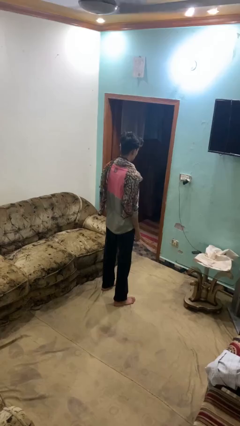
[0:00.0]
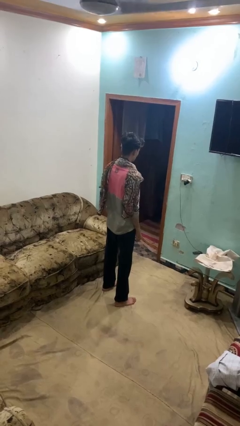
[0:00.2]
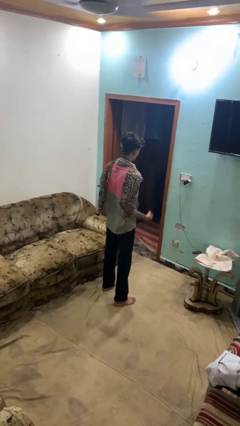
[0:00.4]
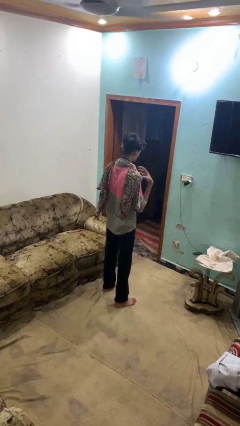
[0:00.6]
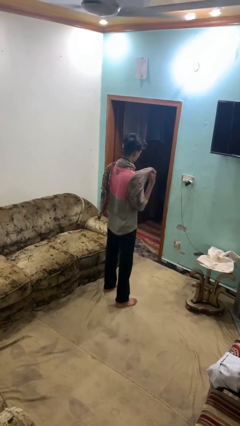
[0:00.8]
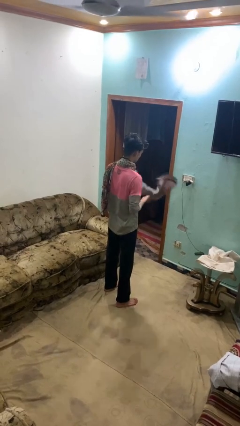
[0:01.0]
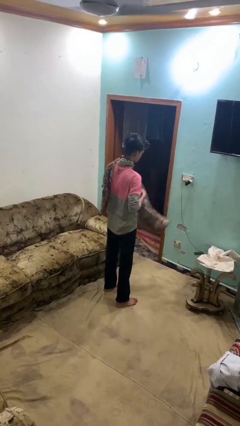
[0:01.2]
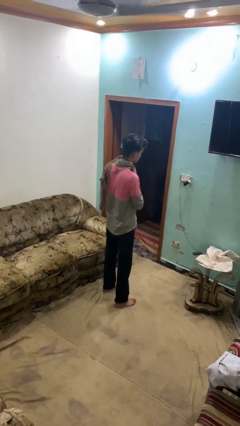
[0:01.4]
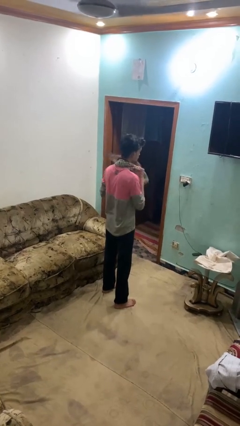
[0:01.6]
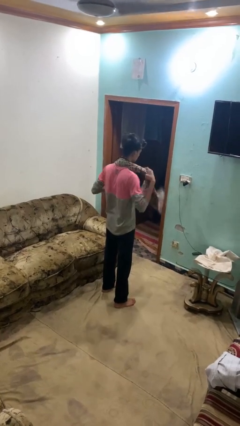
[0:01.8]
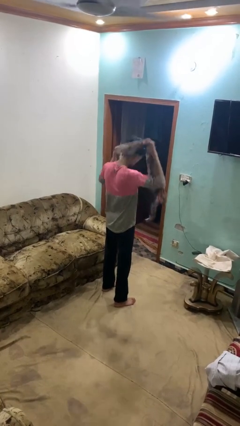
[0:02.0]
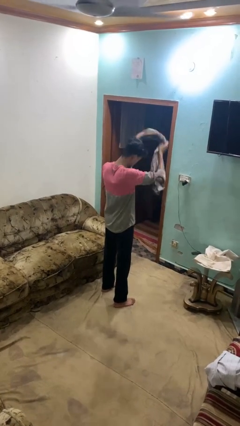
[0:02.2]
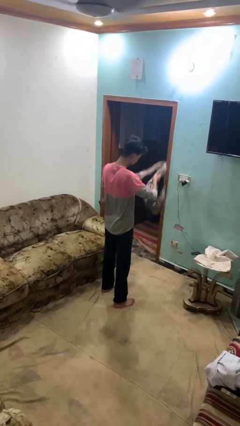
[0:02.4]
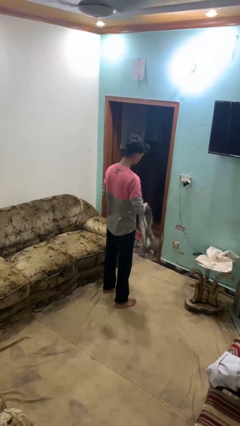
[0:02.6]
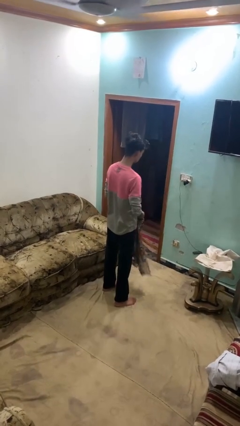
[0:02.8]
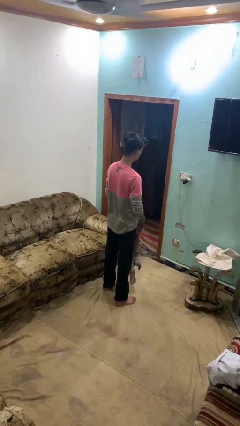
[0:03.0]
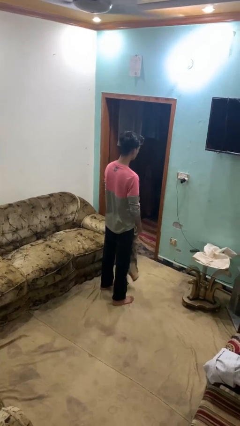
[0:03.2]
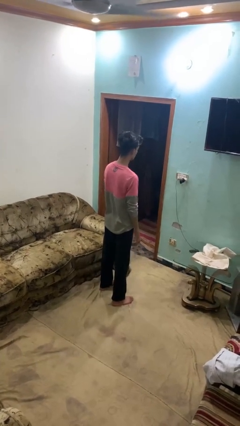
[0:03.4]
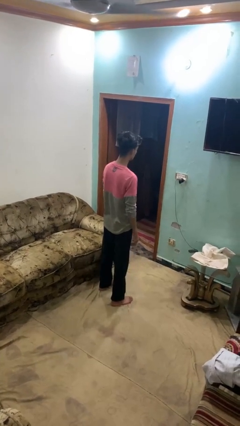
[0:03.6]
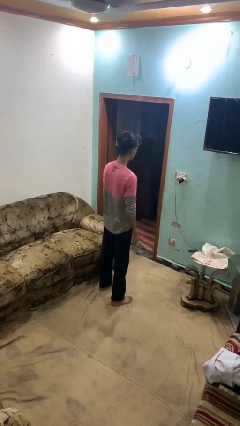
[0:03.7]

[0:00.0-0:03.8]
person takes off scarf

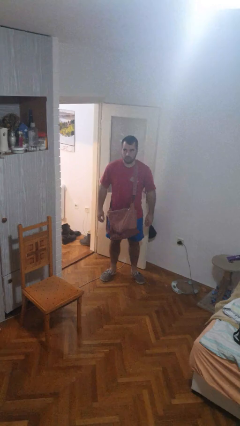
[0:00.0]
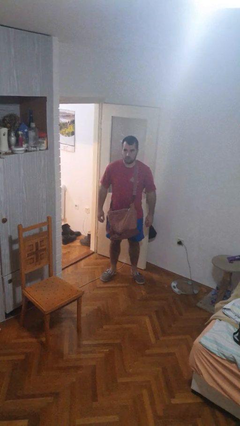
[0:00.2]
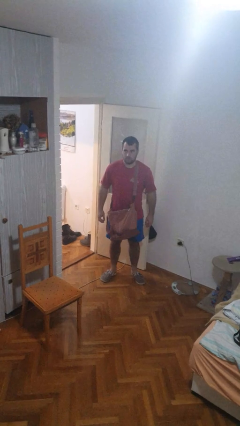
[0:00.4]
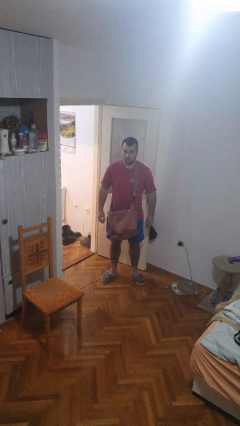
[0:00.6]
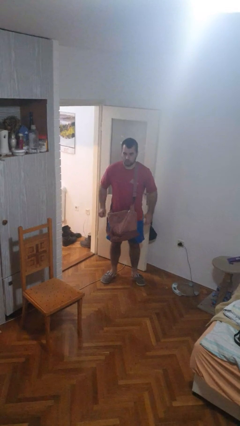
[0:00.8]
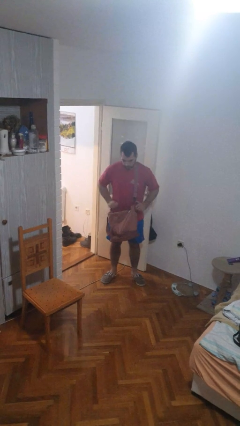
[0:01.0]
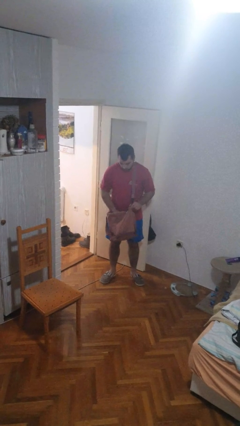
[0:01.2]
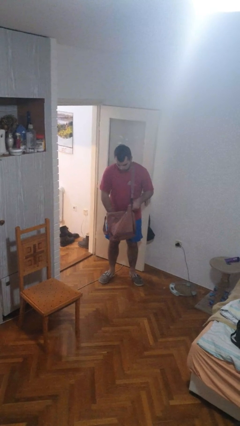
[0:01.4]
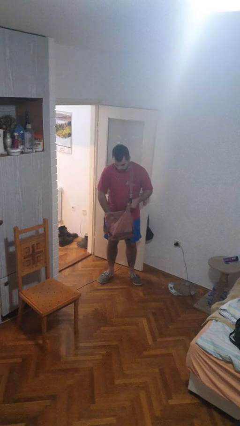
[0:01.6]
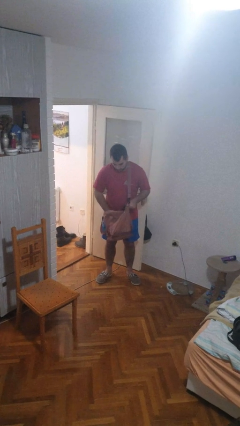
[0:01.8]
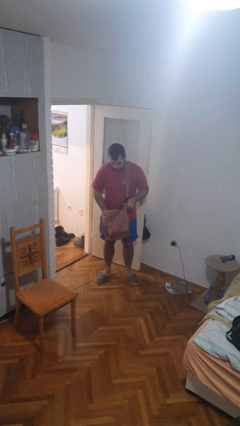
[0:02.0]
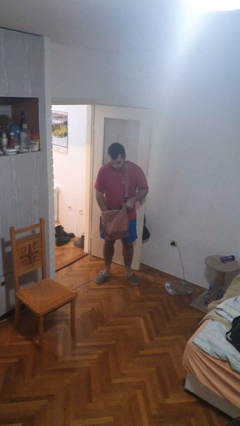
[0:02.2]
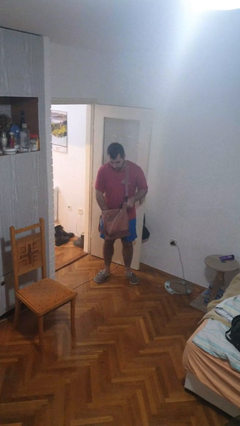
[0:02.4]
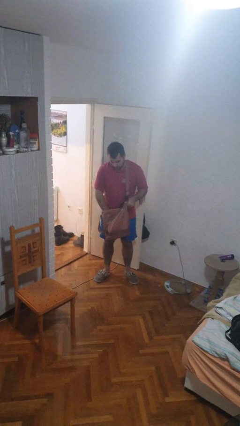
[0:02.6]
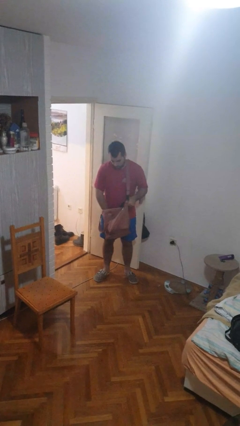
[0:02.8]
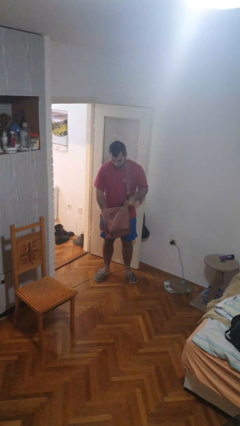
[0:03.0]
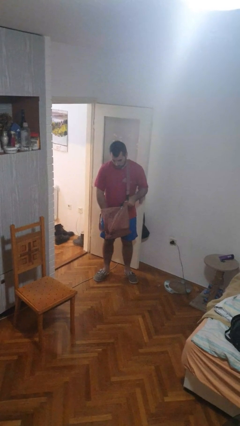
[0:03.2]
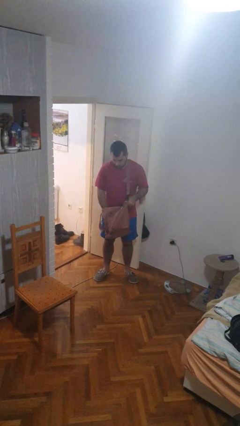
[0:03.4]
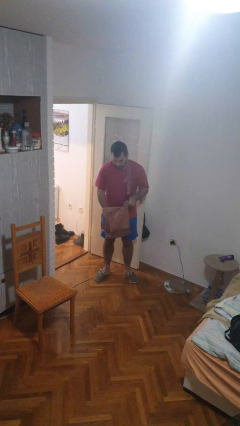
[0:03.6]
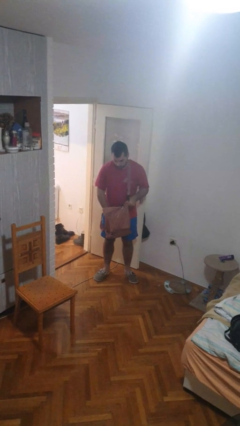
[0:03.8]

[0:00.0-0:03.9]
person searches in purse

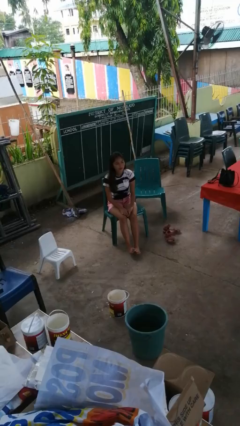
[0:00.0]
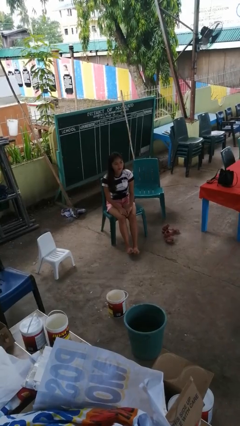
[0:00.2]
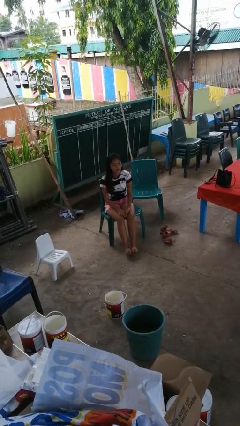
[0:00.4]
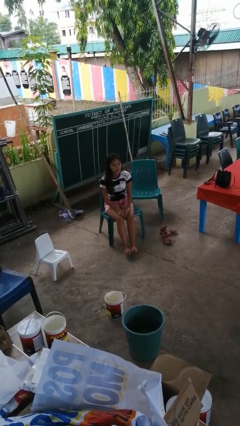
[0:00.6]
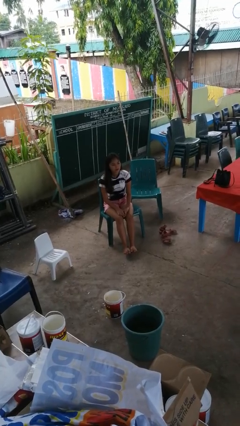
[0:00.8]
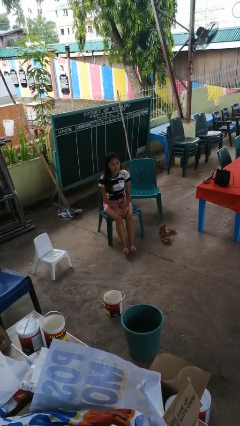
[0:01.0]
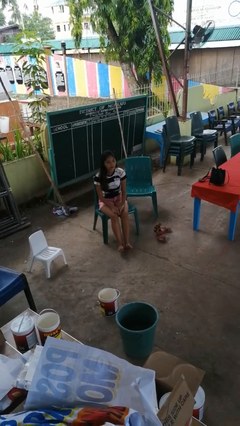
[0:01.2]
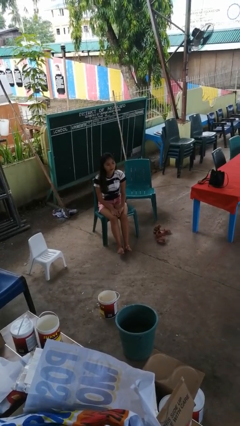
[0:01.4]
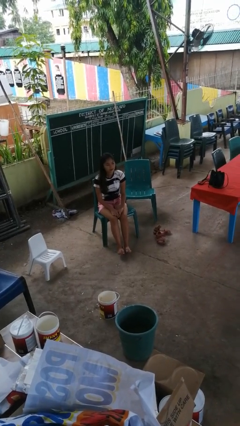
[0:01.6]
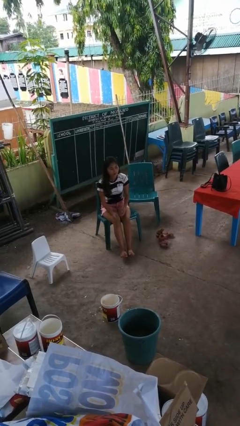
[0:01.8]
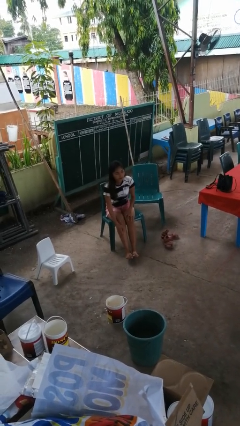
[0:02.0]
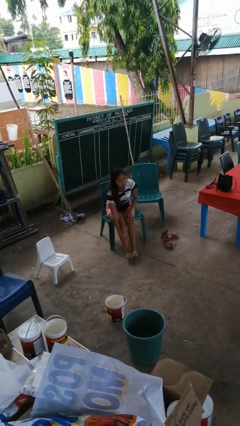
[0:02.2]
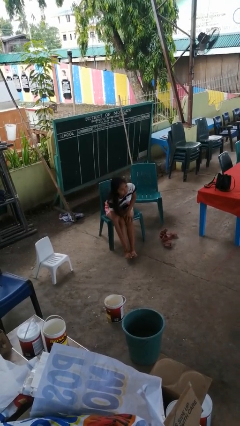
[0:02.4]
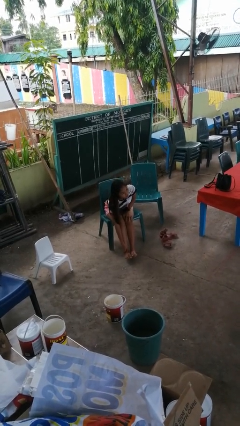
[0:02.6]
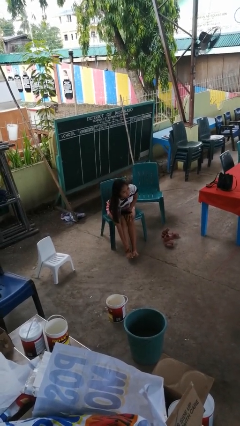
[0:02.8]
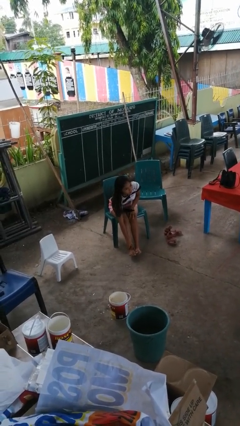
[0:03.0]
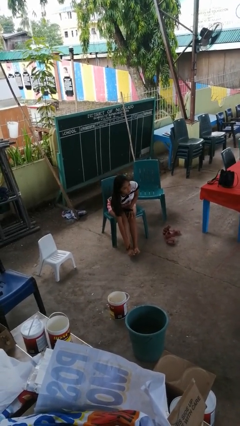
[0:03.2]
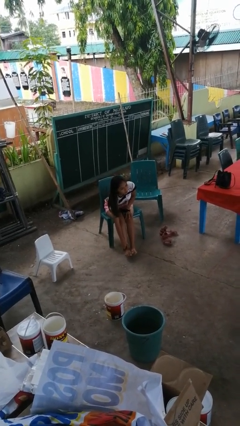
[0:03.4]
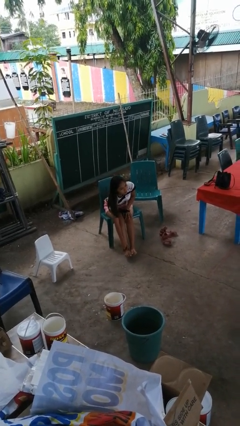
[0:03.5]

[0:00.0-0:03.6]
person rubs foot

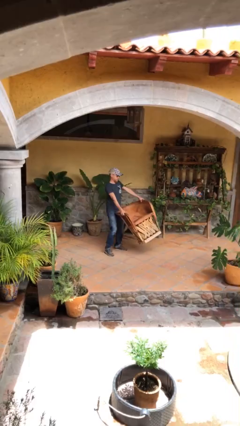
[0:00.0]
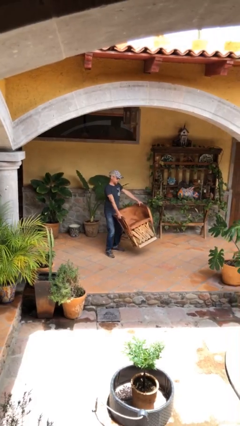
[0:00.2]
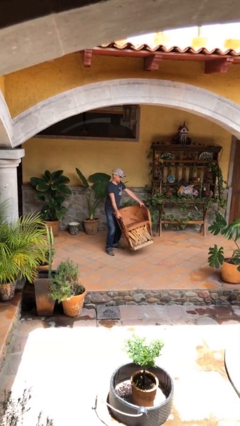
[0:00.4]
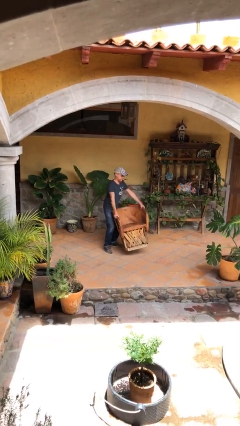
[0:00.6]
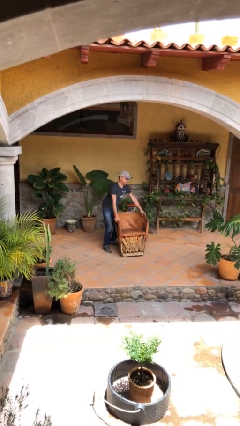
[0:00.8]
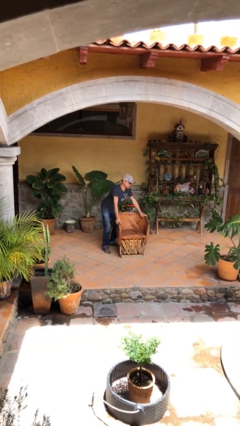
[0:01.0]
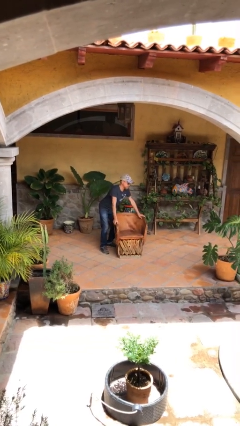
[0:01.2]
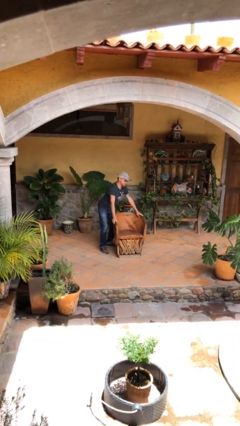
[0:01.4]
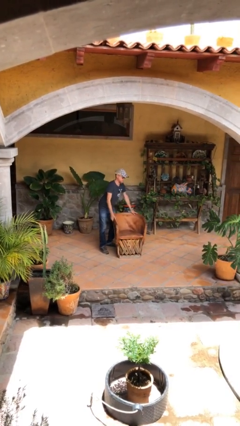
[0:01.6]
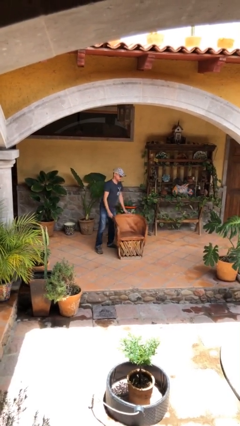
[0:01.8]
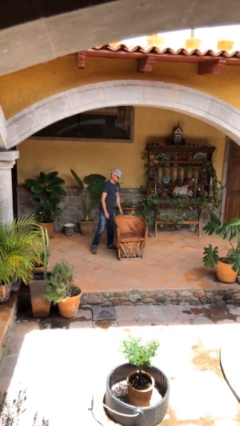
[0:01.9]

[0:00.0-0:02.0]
person puts down object on floor

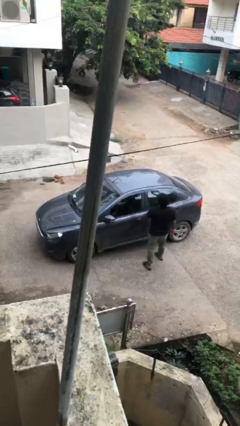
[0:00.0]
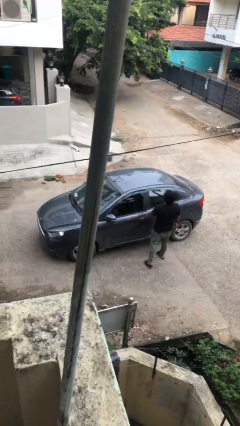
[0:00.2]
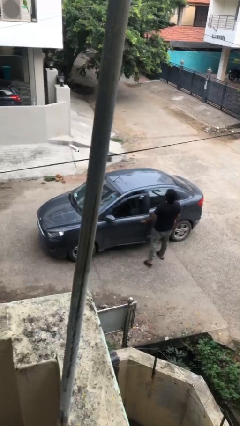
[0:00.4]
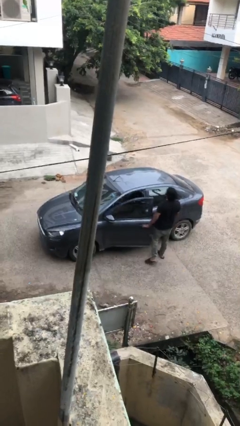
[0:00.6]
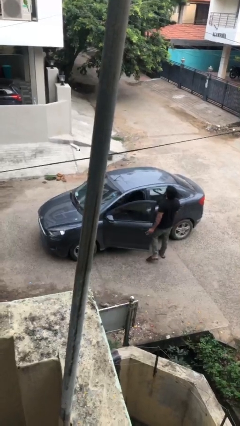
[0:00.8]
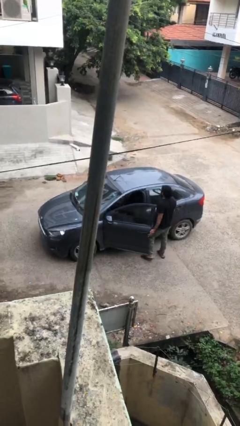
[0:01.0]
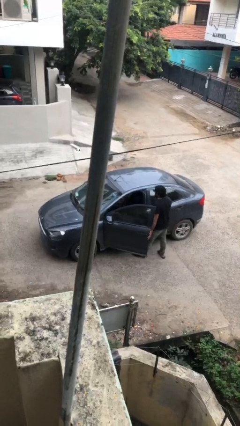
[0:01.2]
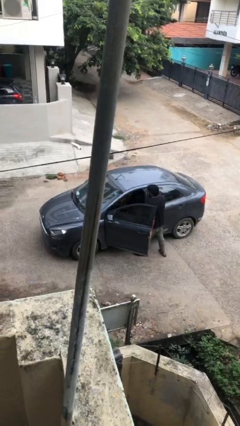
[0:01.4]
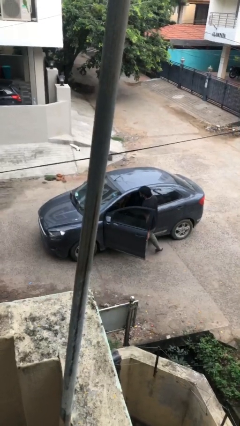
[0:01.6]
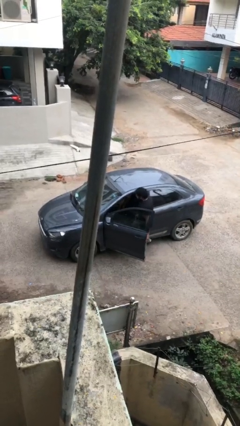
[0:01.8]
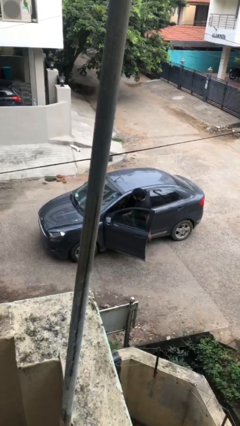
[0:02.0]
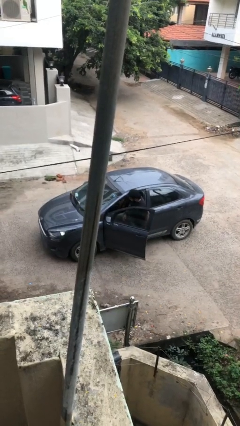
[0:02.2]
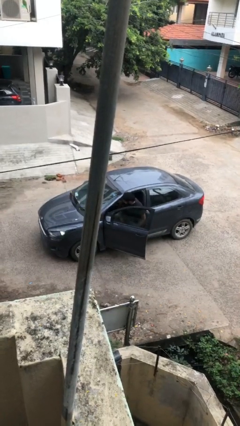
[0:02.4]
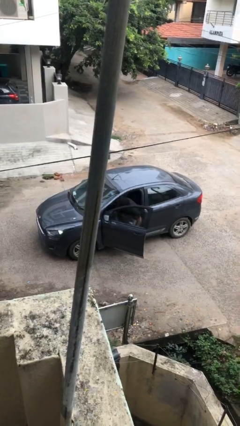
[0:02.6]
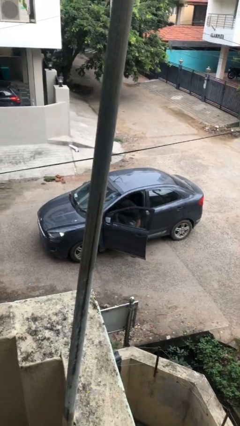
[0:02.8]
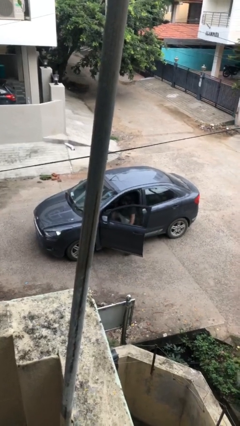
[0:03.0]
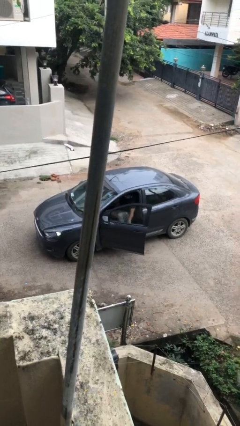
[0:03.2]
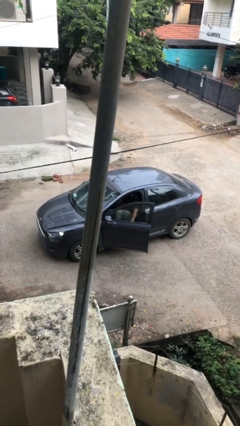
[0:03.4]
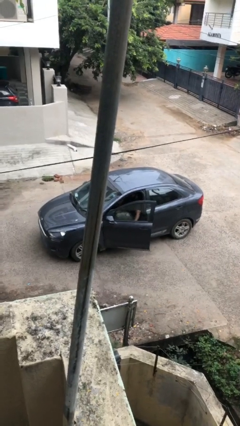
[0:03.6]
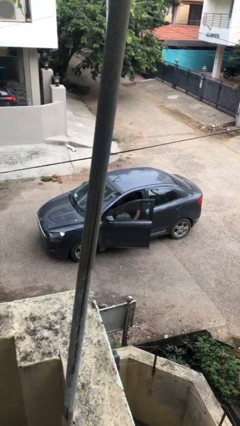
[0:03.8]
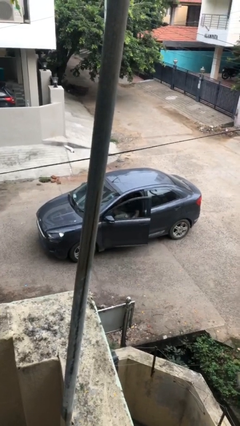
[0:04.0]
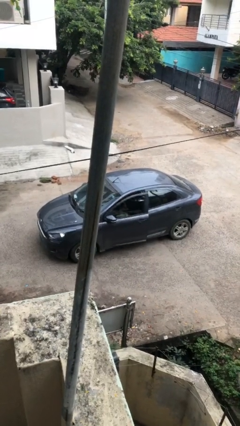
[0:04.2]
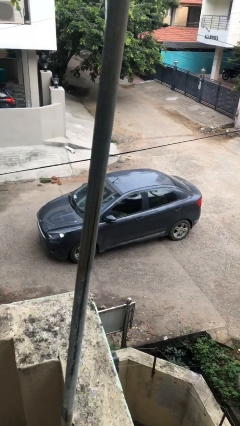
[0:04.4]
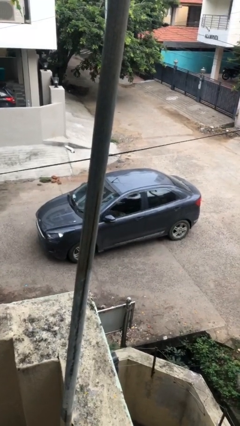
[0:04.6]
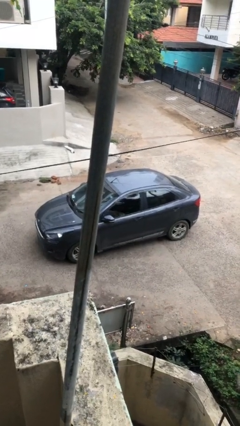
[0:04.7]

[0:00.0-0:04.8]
car picks up person
